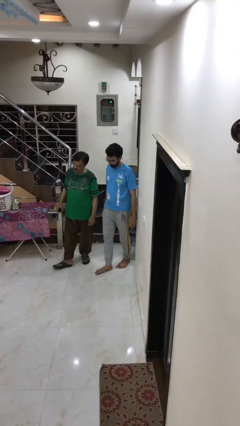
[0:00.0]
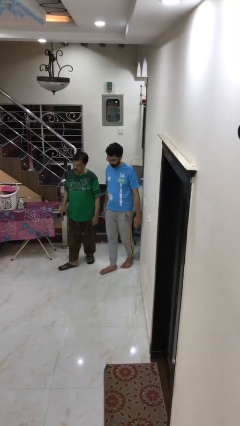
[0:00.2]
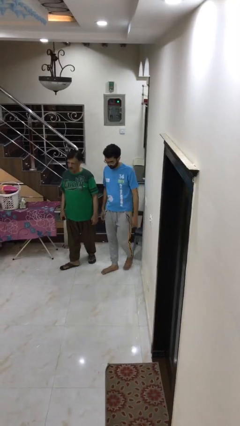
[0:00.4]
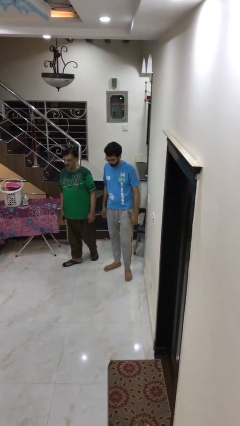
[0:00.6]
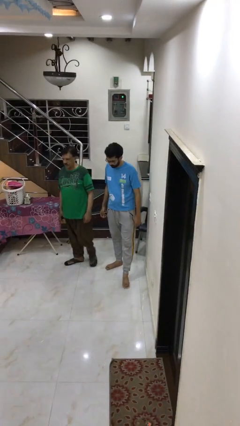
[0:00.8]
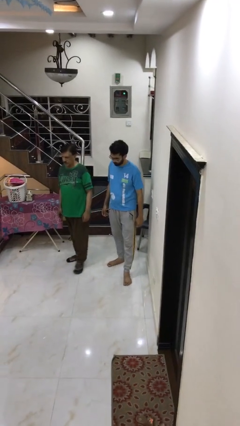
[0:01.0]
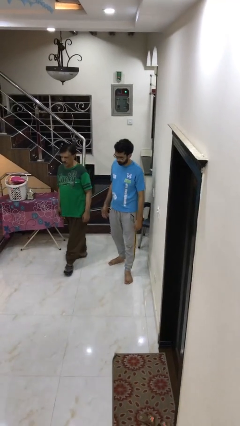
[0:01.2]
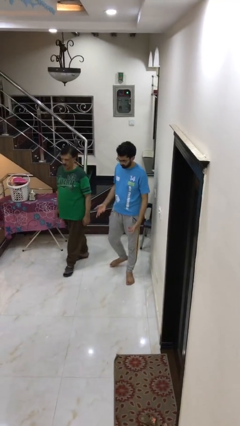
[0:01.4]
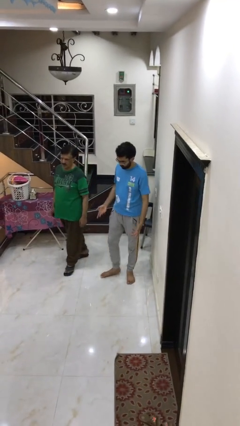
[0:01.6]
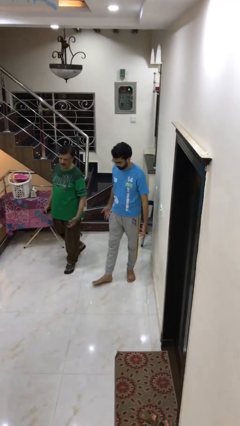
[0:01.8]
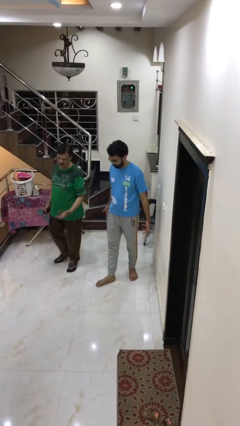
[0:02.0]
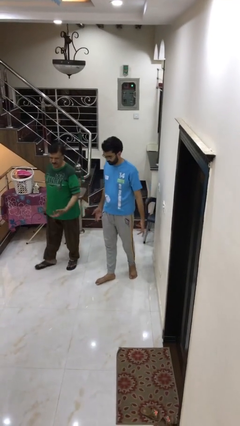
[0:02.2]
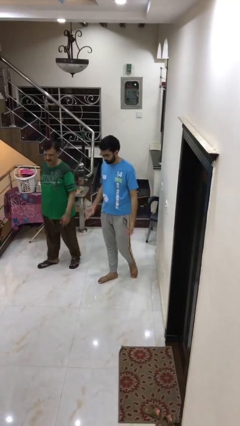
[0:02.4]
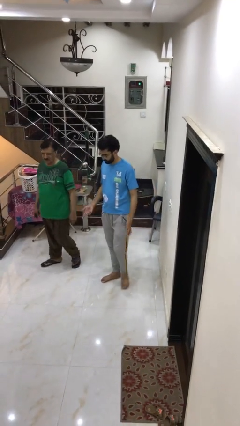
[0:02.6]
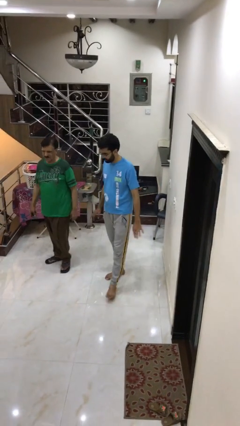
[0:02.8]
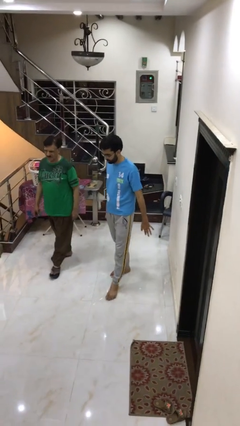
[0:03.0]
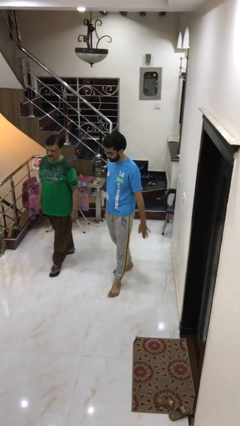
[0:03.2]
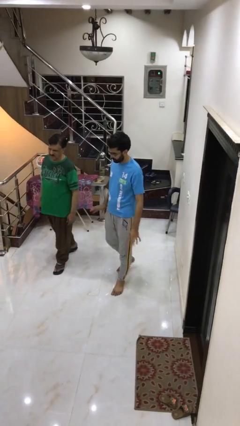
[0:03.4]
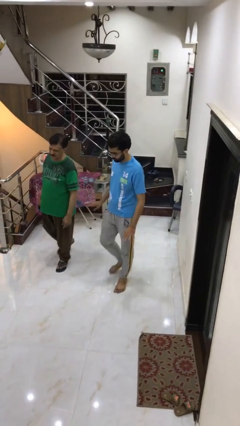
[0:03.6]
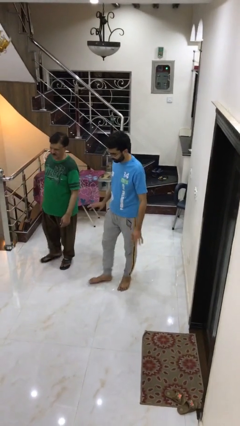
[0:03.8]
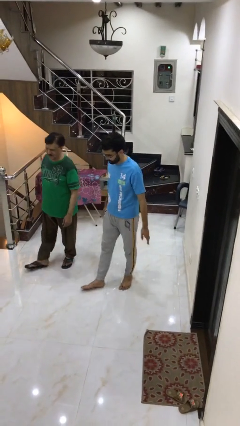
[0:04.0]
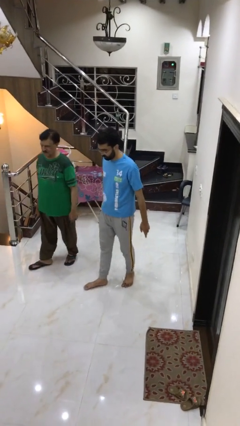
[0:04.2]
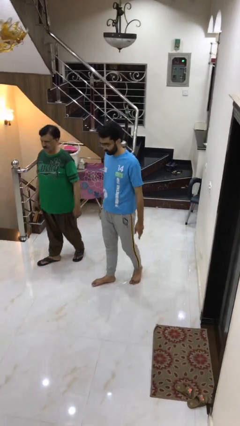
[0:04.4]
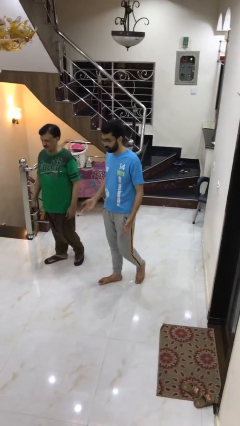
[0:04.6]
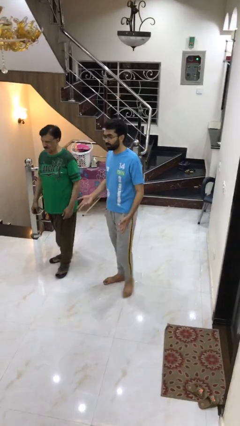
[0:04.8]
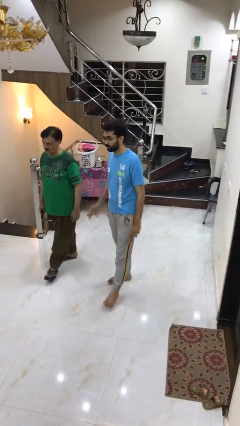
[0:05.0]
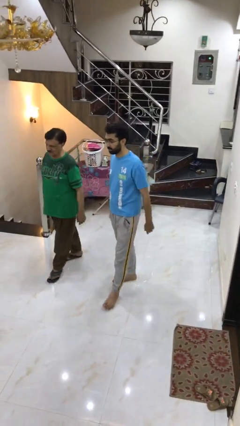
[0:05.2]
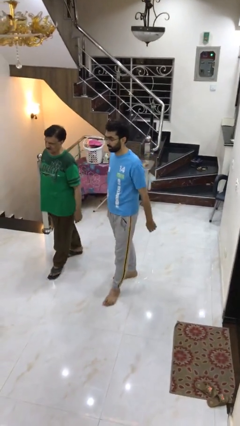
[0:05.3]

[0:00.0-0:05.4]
person talks to person

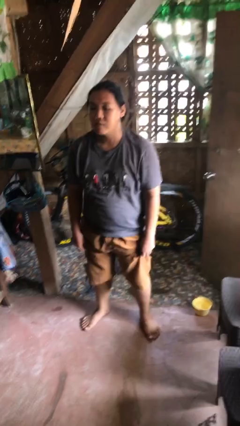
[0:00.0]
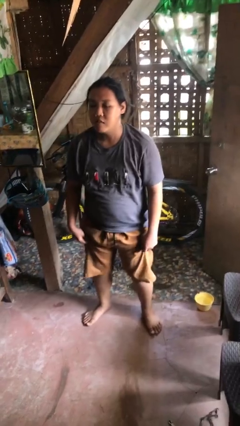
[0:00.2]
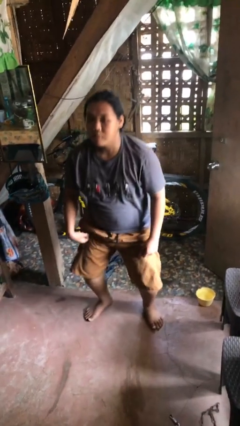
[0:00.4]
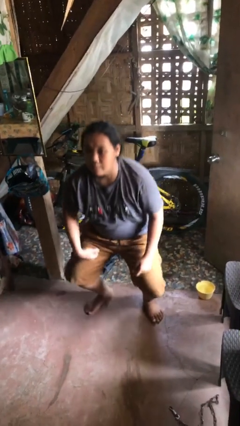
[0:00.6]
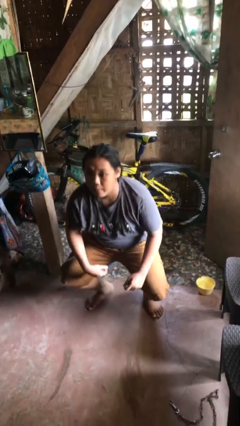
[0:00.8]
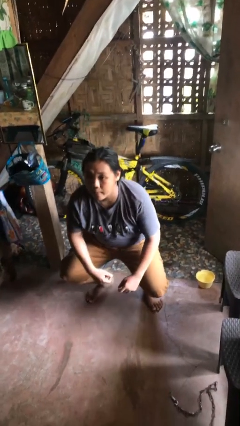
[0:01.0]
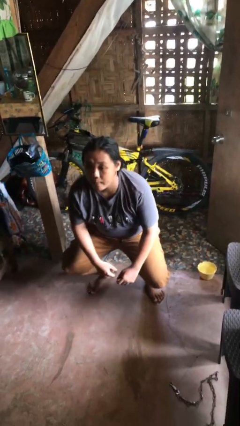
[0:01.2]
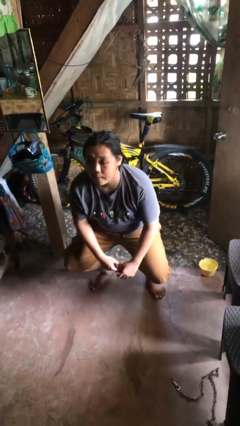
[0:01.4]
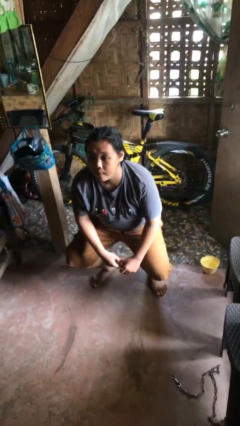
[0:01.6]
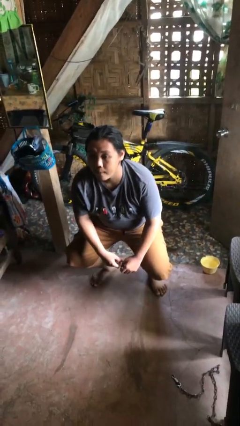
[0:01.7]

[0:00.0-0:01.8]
person squats

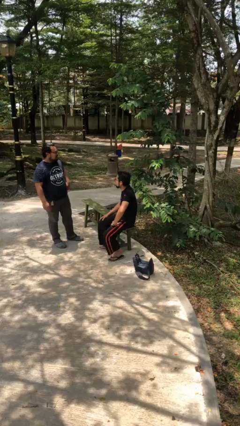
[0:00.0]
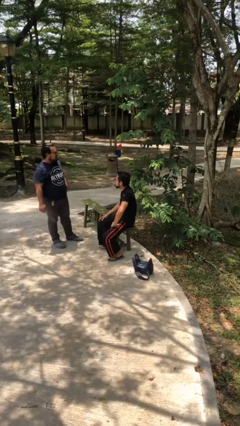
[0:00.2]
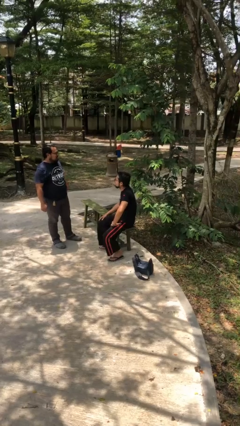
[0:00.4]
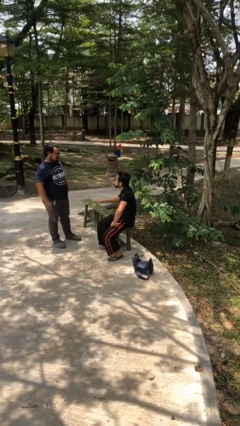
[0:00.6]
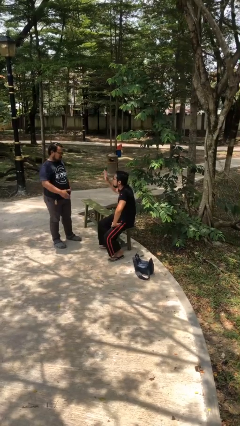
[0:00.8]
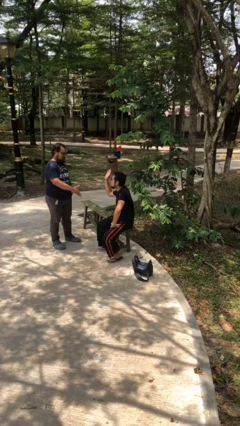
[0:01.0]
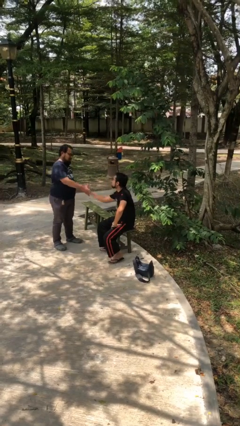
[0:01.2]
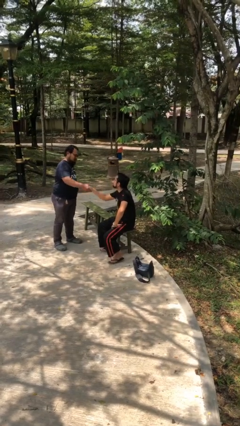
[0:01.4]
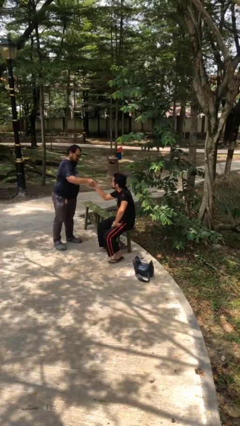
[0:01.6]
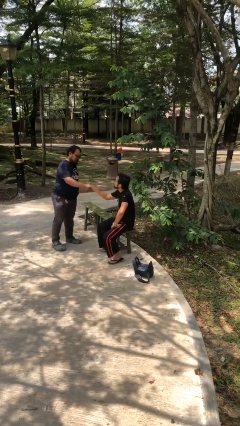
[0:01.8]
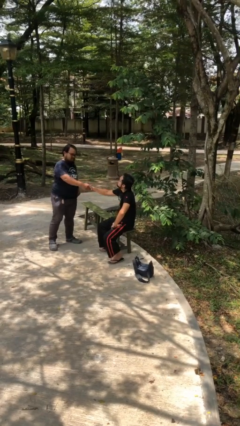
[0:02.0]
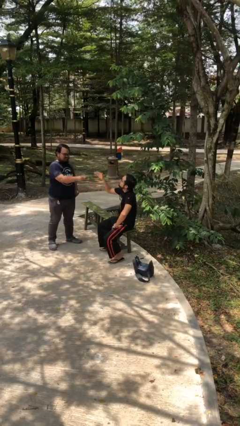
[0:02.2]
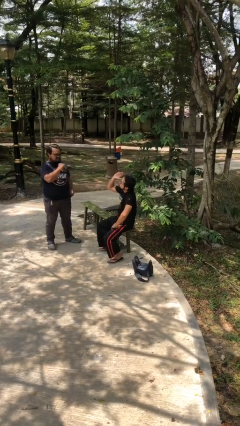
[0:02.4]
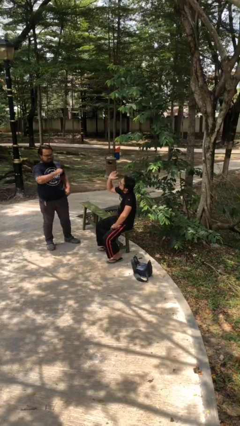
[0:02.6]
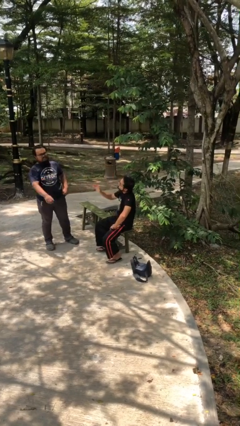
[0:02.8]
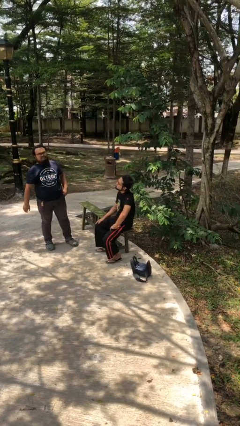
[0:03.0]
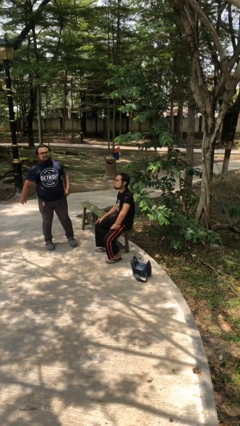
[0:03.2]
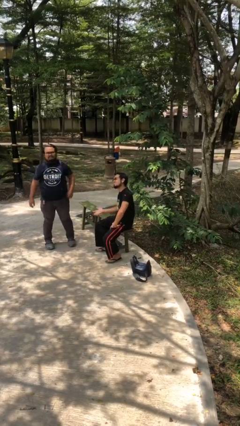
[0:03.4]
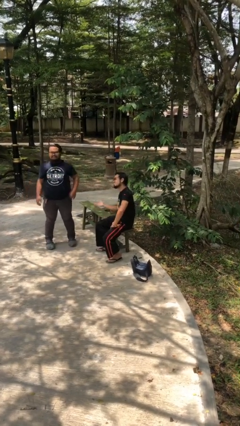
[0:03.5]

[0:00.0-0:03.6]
person shakes hand

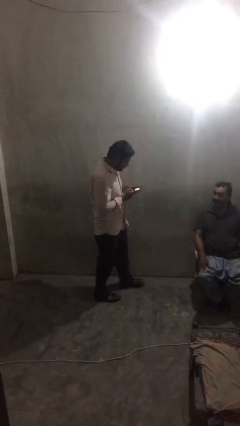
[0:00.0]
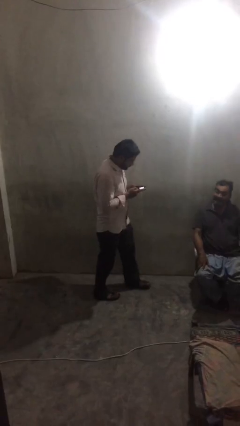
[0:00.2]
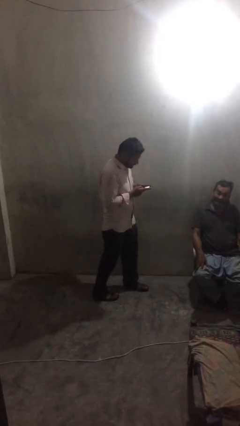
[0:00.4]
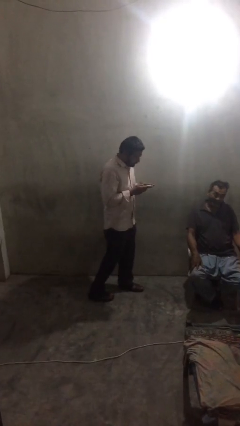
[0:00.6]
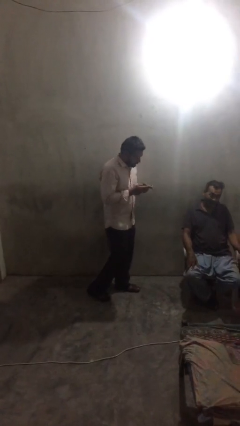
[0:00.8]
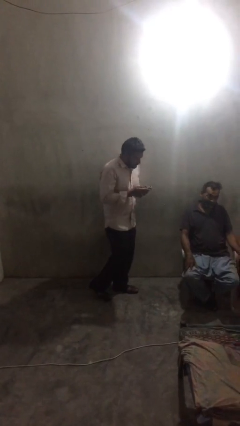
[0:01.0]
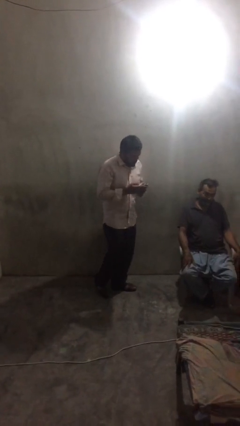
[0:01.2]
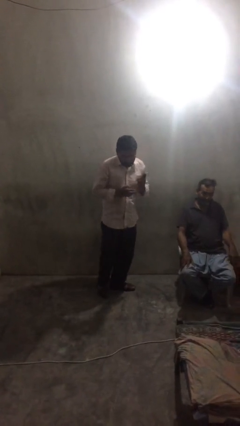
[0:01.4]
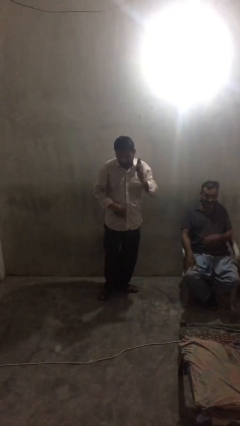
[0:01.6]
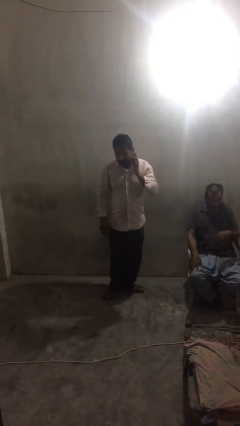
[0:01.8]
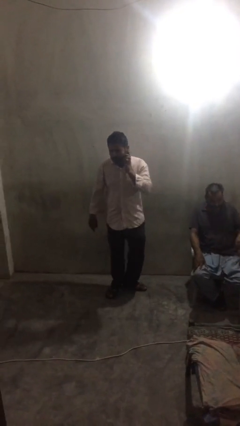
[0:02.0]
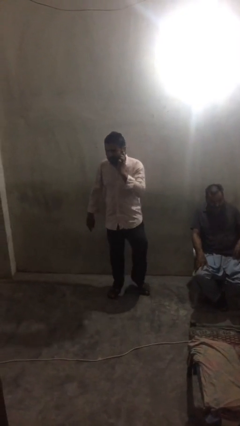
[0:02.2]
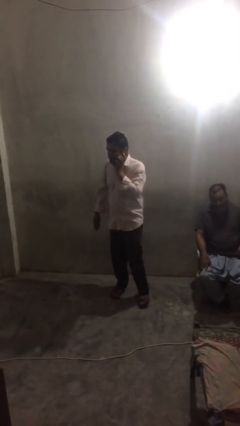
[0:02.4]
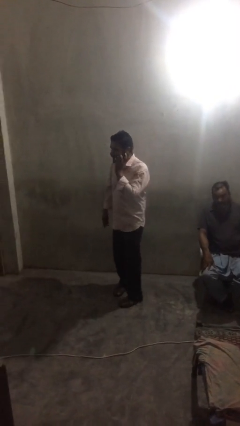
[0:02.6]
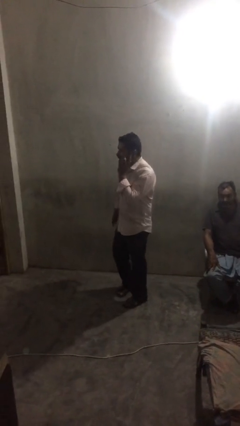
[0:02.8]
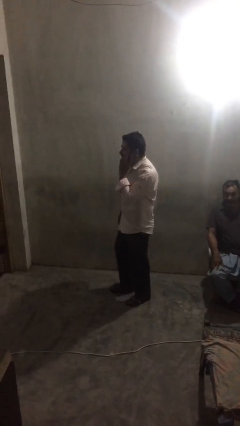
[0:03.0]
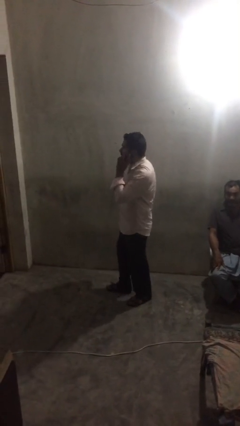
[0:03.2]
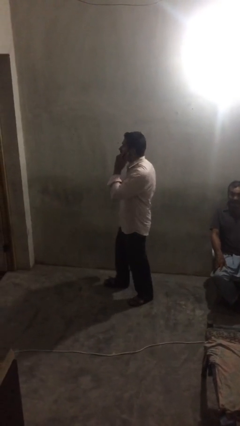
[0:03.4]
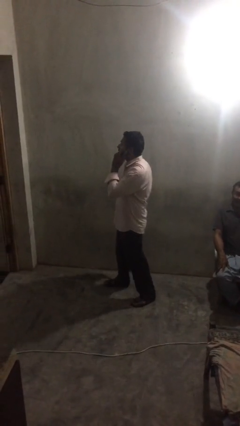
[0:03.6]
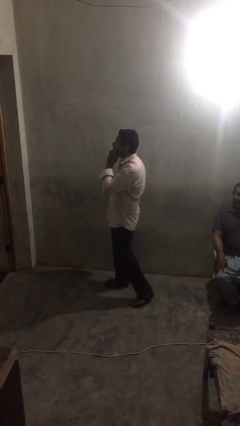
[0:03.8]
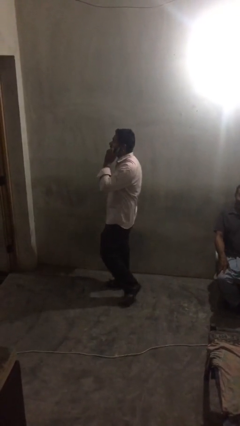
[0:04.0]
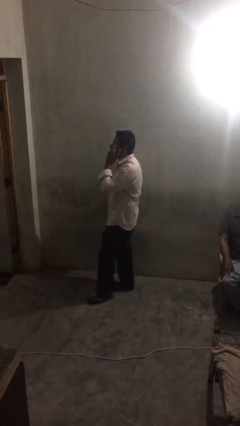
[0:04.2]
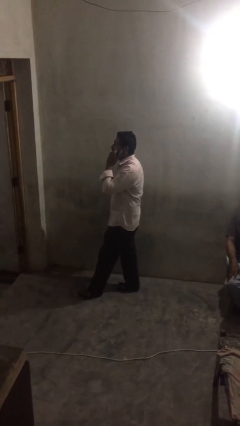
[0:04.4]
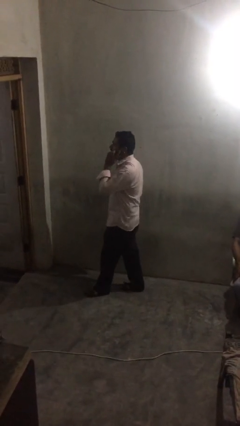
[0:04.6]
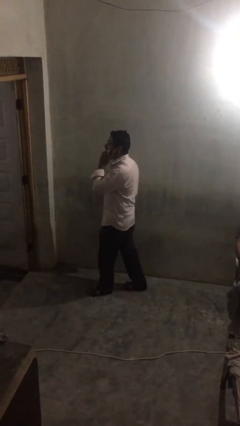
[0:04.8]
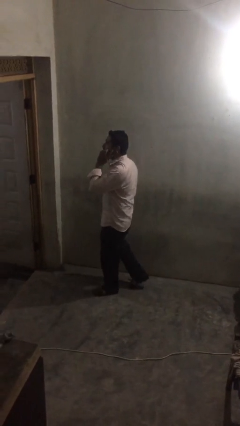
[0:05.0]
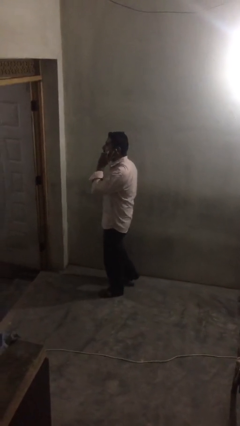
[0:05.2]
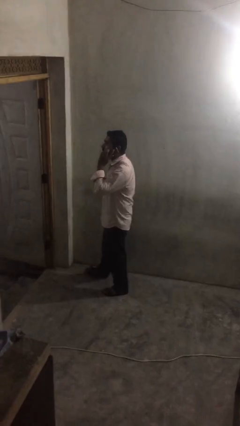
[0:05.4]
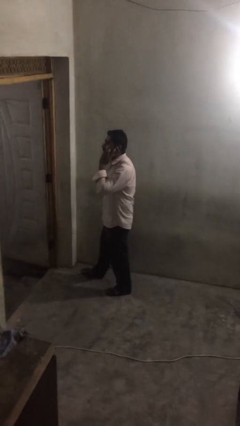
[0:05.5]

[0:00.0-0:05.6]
person talks on phone

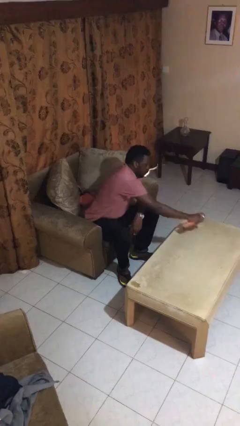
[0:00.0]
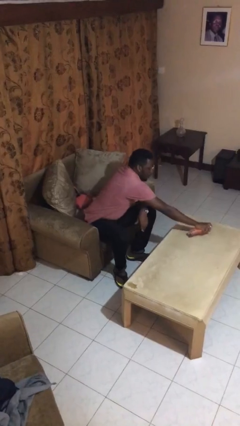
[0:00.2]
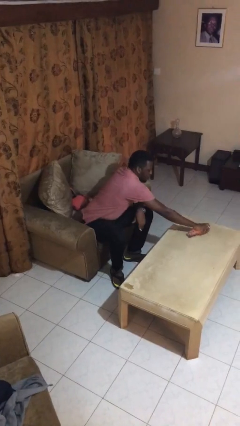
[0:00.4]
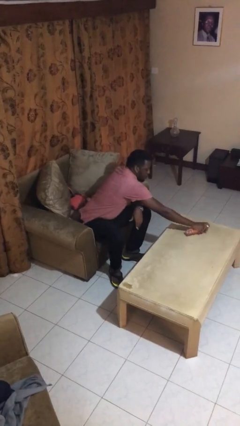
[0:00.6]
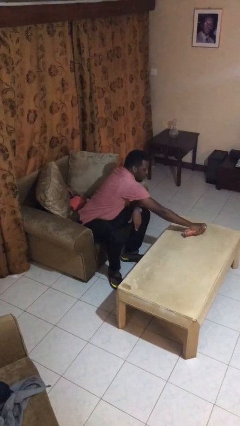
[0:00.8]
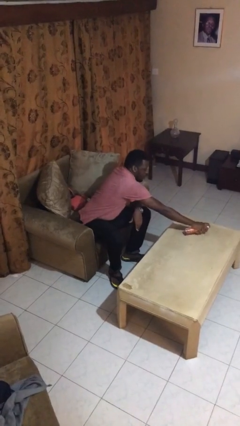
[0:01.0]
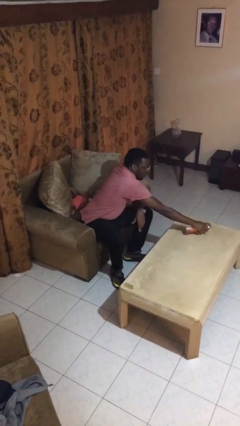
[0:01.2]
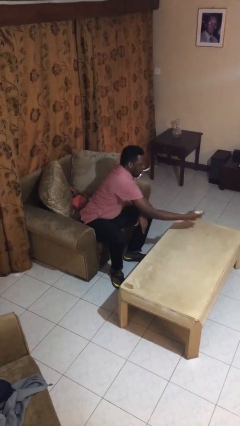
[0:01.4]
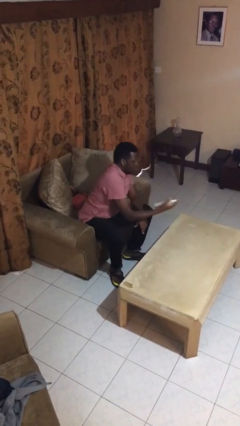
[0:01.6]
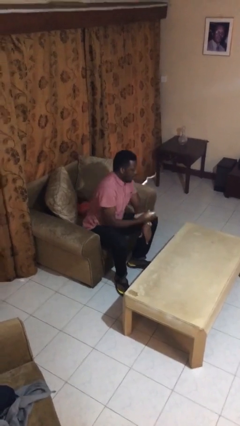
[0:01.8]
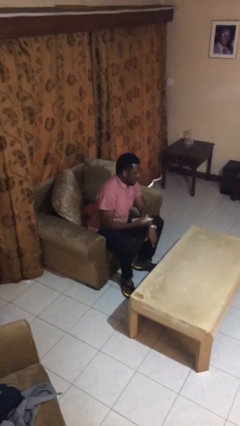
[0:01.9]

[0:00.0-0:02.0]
person sprays from bottle
